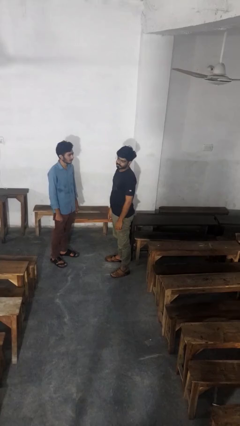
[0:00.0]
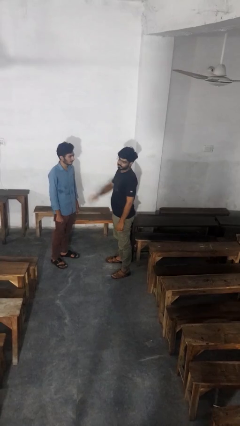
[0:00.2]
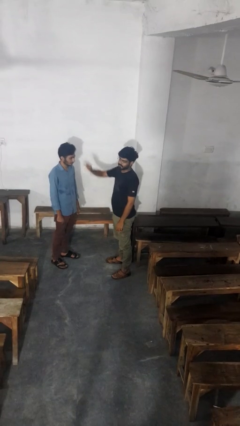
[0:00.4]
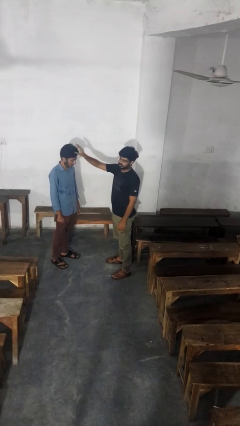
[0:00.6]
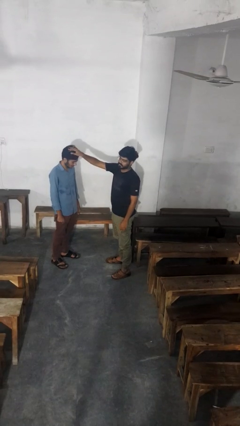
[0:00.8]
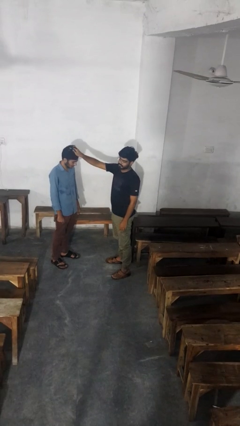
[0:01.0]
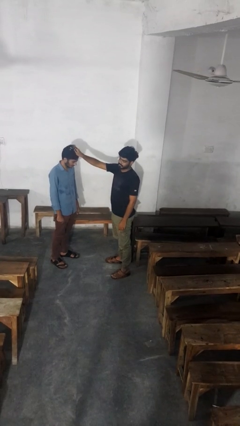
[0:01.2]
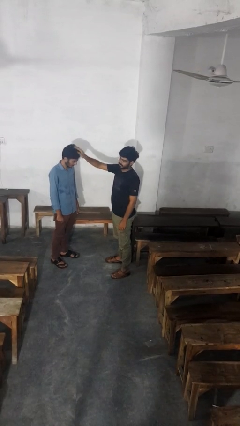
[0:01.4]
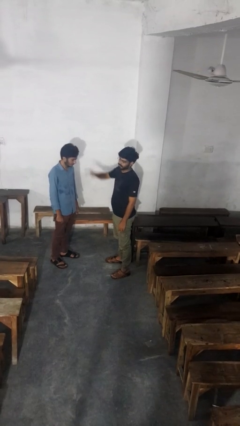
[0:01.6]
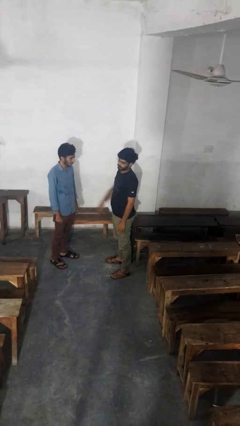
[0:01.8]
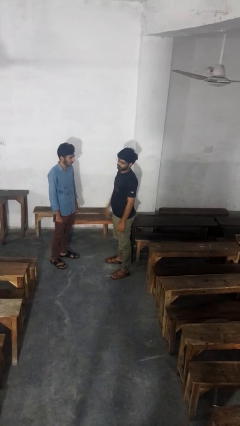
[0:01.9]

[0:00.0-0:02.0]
person grabs person by hair

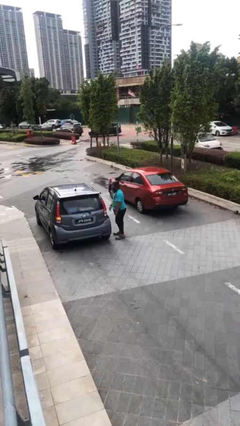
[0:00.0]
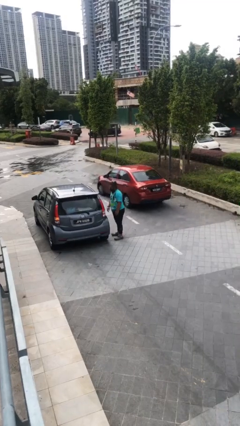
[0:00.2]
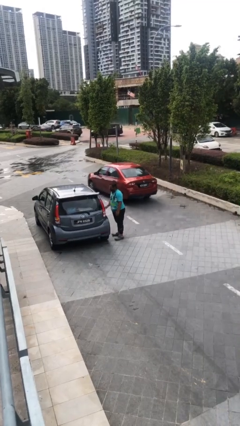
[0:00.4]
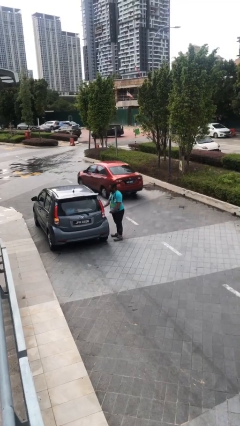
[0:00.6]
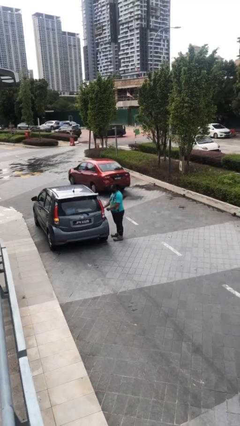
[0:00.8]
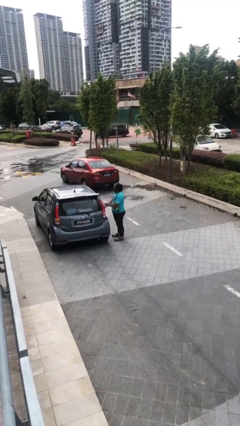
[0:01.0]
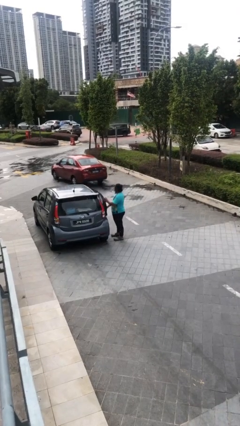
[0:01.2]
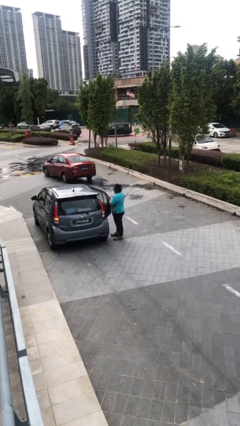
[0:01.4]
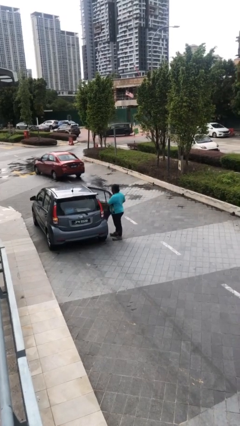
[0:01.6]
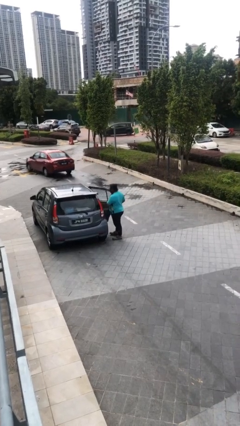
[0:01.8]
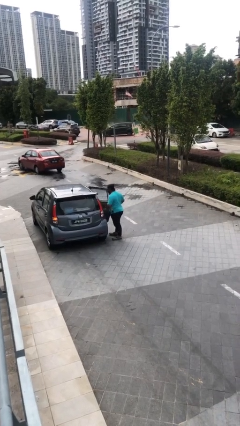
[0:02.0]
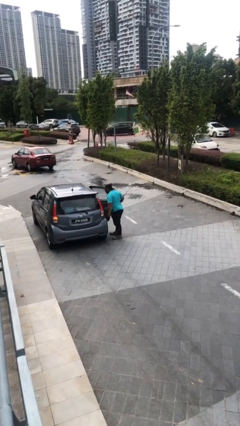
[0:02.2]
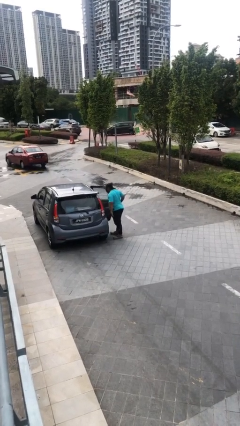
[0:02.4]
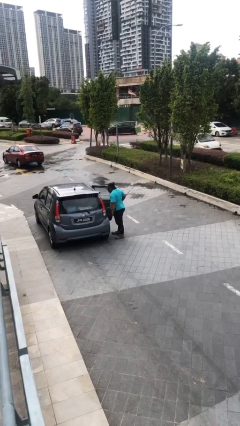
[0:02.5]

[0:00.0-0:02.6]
person opens car door

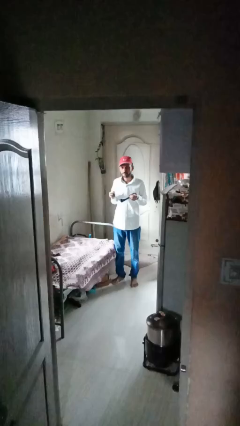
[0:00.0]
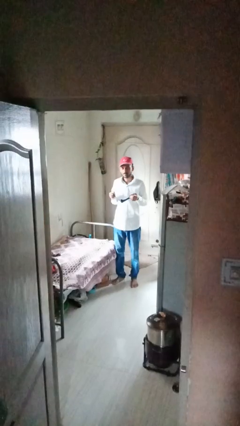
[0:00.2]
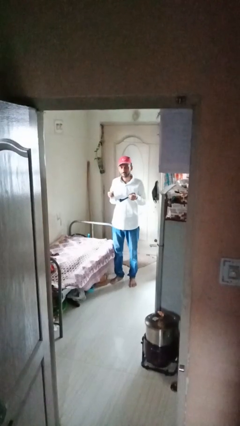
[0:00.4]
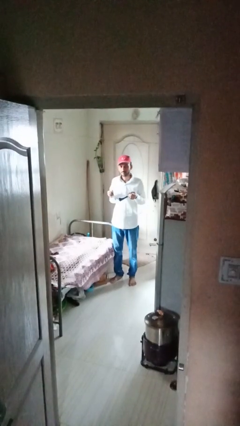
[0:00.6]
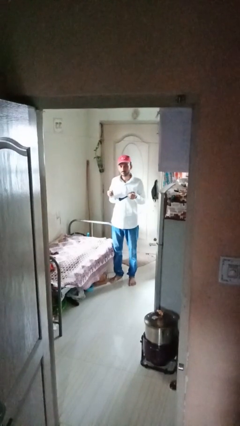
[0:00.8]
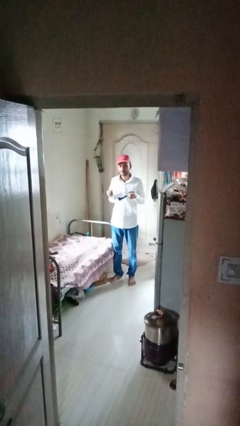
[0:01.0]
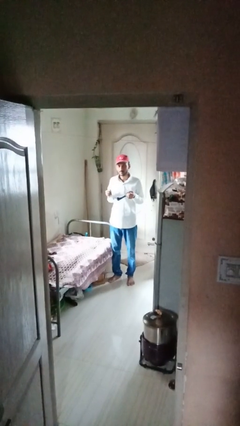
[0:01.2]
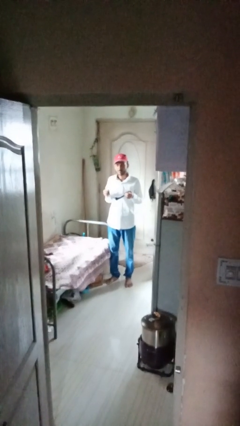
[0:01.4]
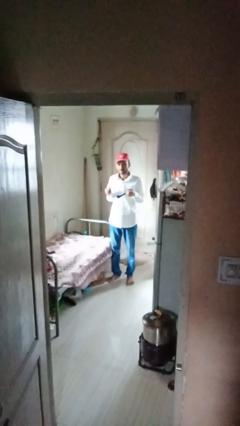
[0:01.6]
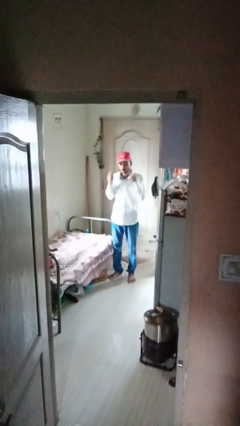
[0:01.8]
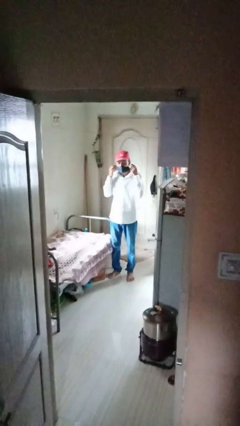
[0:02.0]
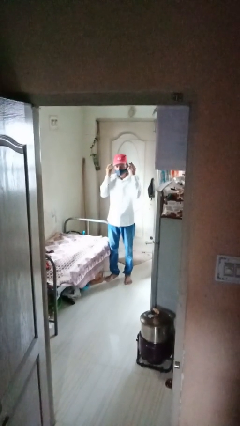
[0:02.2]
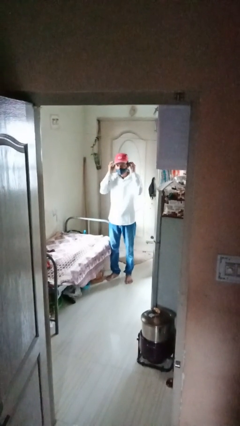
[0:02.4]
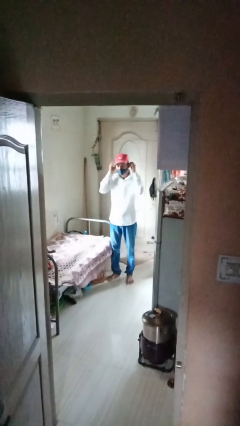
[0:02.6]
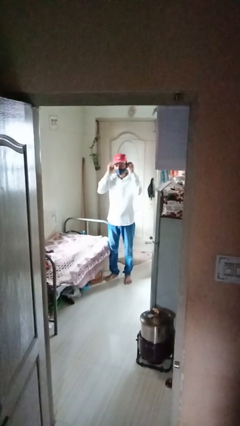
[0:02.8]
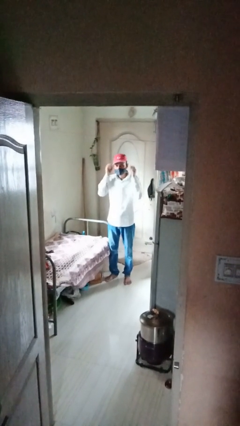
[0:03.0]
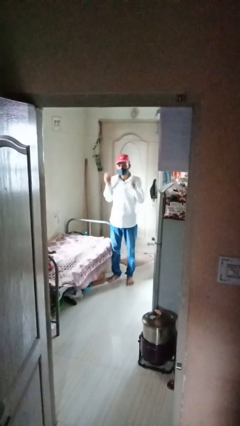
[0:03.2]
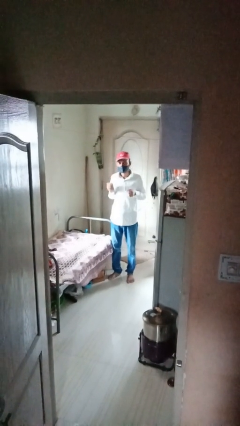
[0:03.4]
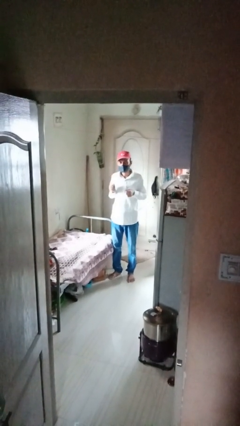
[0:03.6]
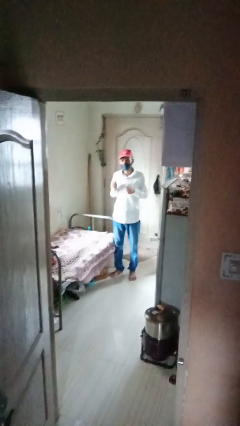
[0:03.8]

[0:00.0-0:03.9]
person puts on facemask

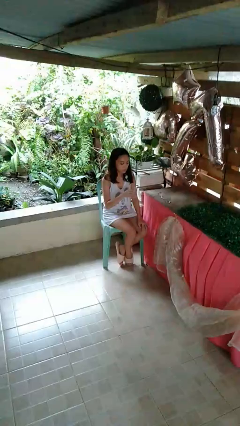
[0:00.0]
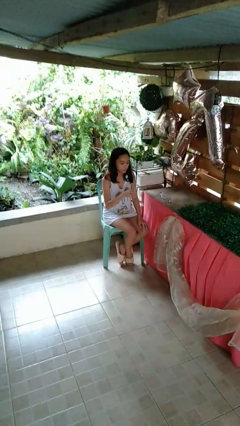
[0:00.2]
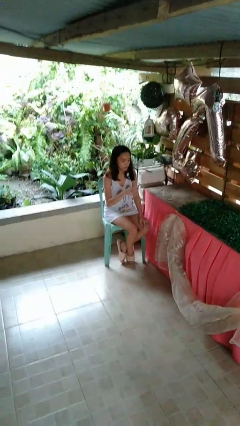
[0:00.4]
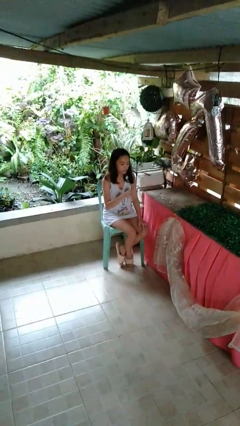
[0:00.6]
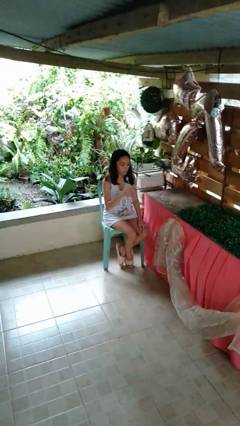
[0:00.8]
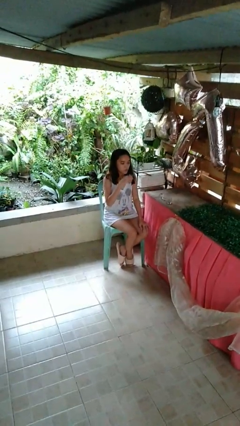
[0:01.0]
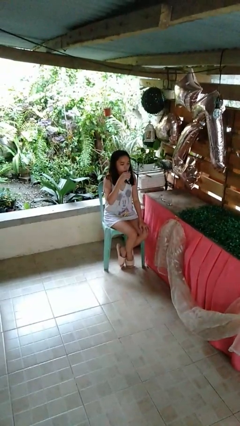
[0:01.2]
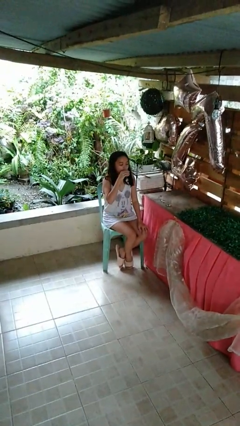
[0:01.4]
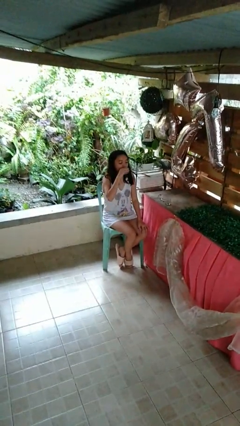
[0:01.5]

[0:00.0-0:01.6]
person drinks from shotglass

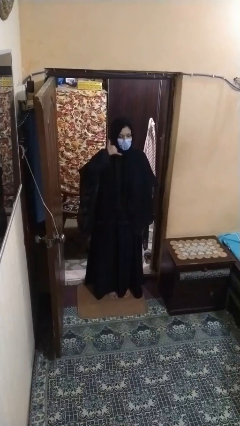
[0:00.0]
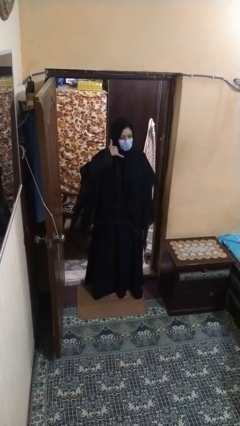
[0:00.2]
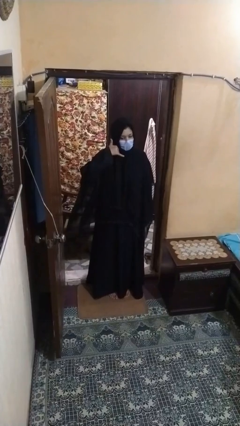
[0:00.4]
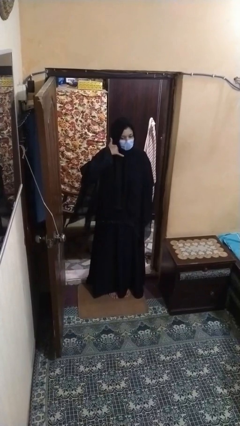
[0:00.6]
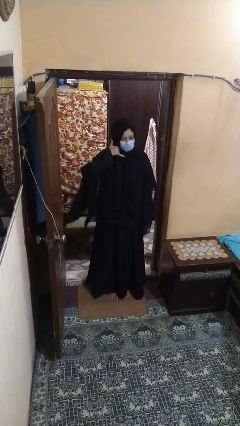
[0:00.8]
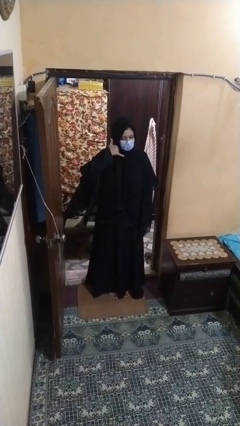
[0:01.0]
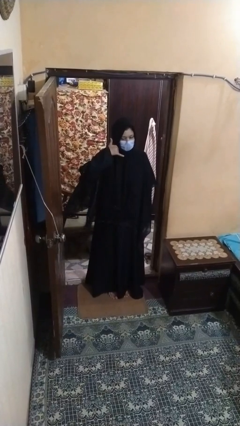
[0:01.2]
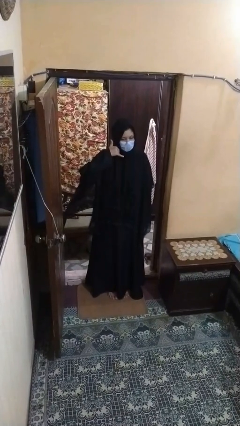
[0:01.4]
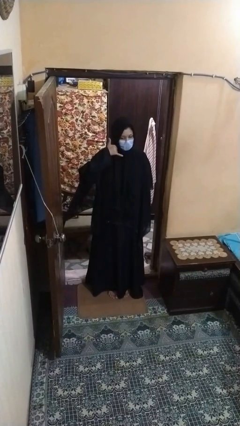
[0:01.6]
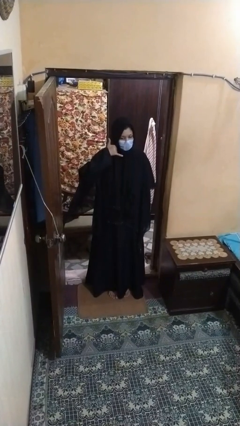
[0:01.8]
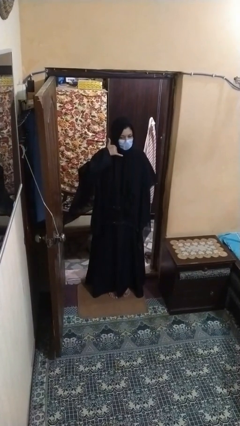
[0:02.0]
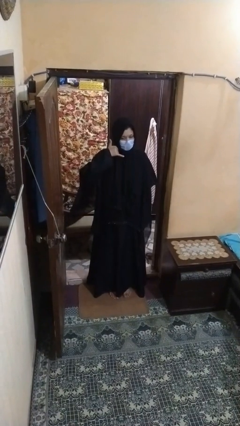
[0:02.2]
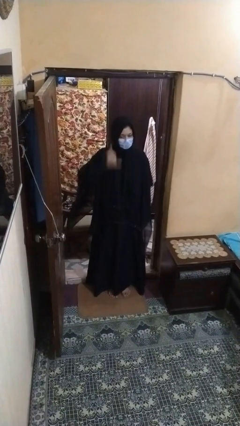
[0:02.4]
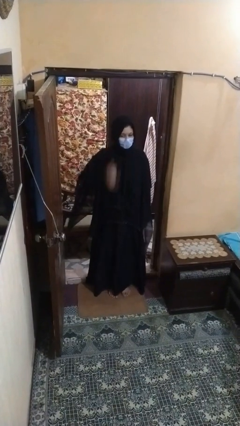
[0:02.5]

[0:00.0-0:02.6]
person gestures call me

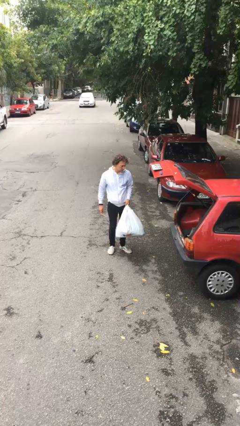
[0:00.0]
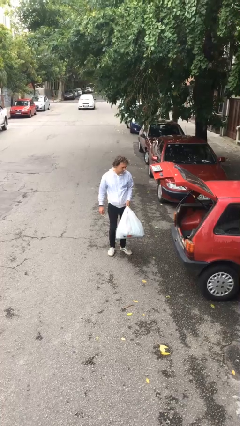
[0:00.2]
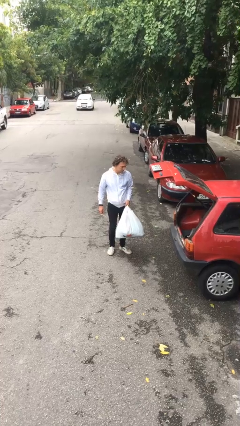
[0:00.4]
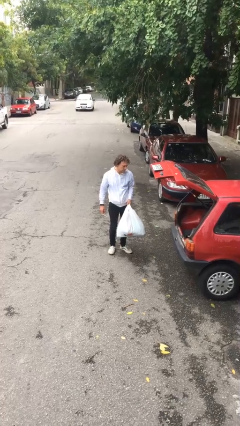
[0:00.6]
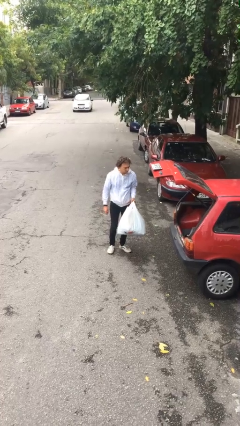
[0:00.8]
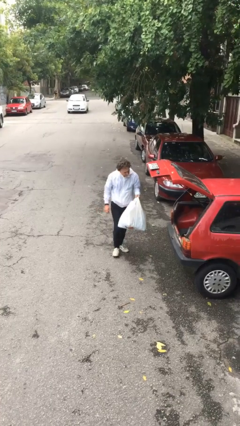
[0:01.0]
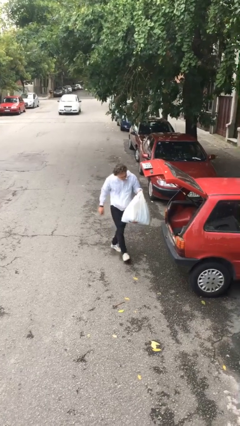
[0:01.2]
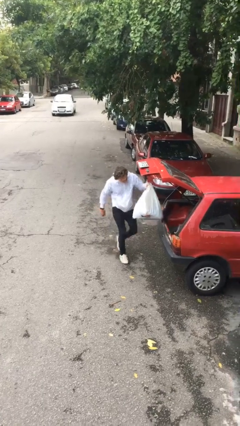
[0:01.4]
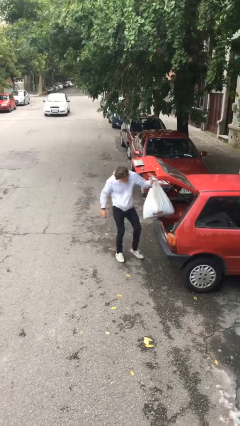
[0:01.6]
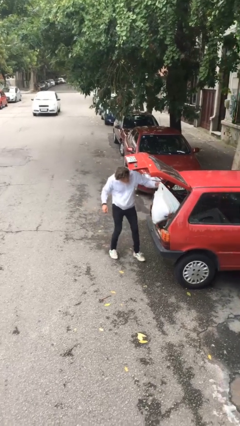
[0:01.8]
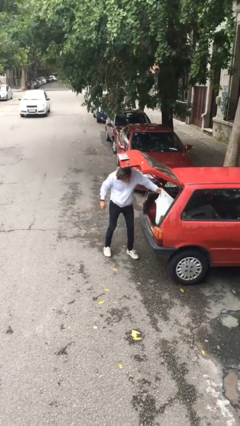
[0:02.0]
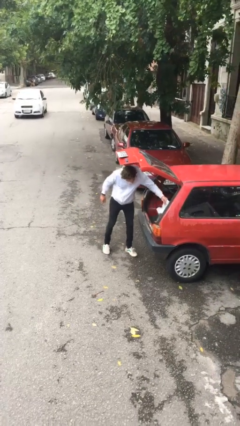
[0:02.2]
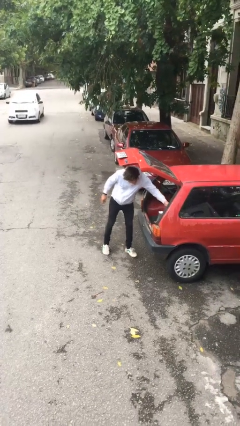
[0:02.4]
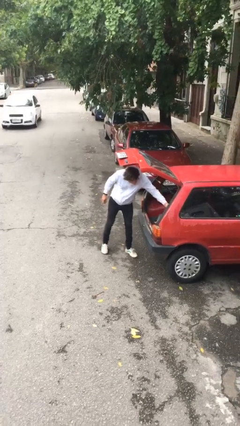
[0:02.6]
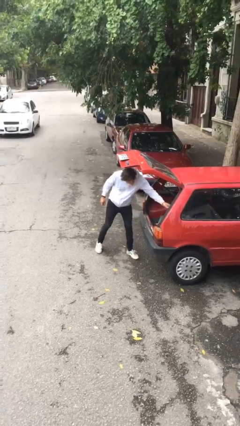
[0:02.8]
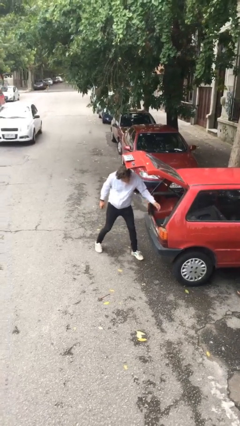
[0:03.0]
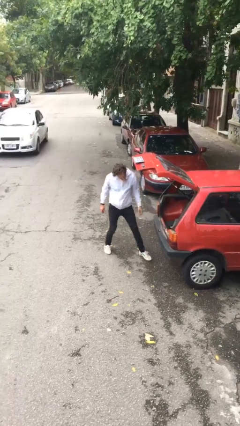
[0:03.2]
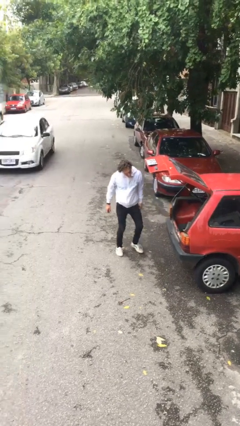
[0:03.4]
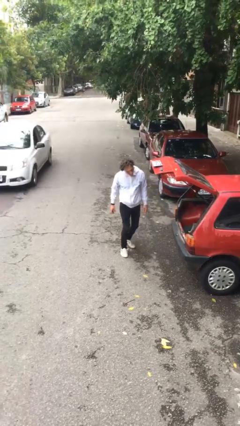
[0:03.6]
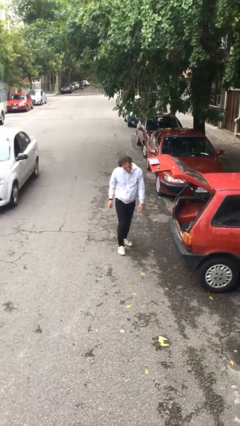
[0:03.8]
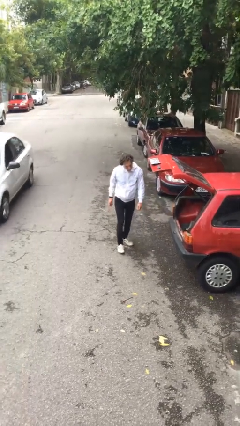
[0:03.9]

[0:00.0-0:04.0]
person loads car

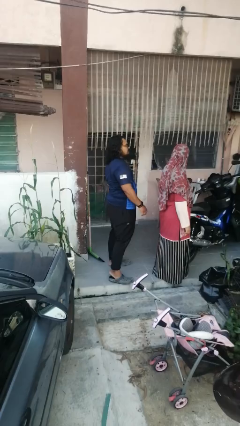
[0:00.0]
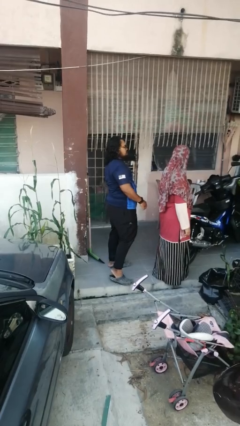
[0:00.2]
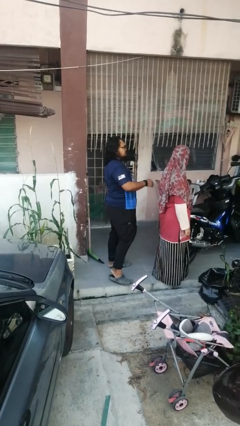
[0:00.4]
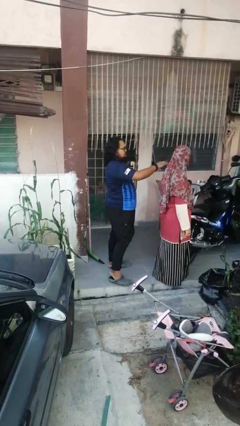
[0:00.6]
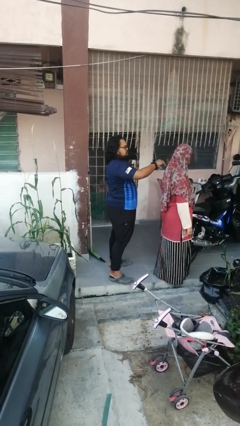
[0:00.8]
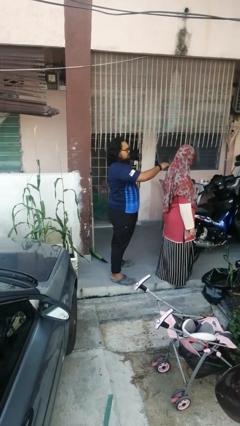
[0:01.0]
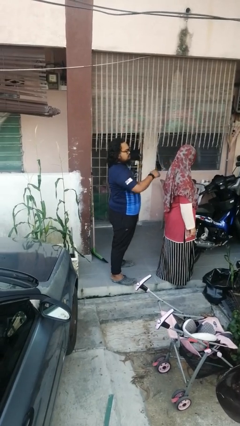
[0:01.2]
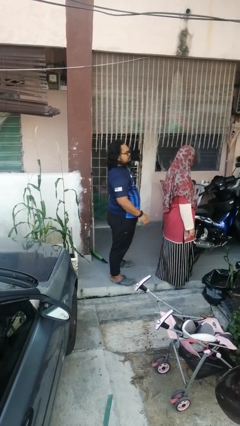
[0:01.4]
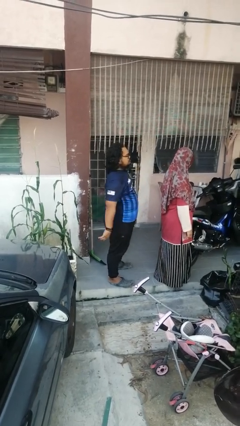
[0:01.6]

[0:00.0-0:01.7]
person touches back of person
